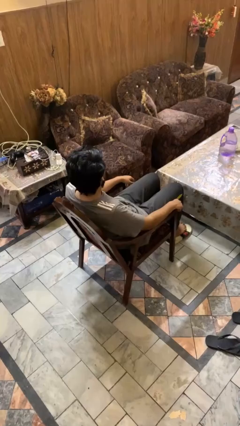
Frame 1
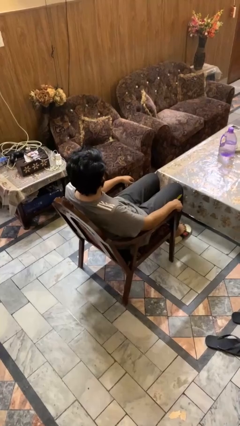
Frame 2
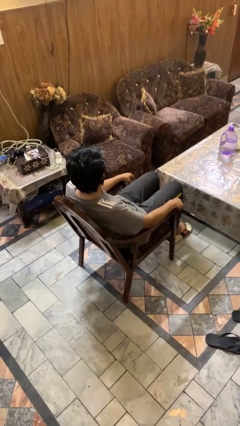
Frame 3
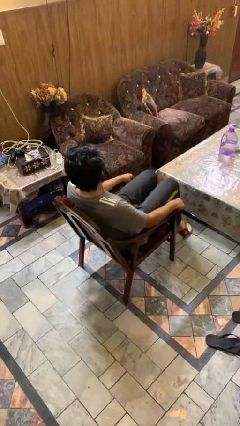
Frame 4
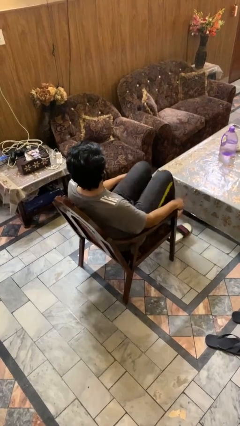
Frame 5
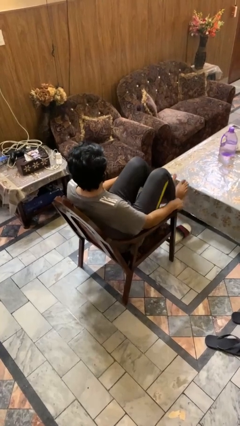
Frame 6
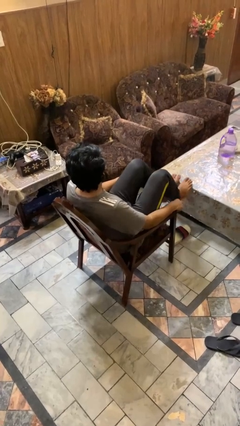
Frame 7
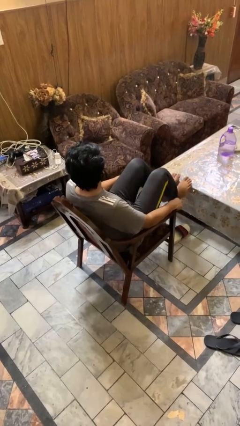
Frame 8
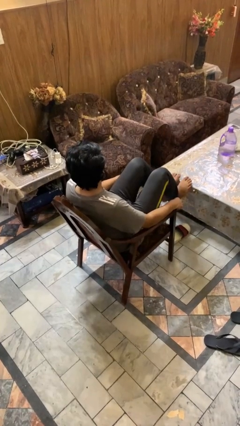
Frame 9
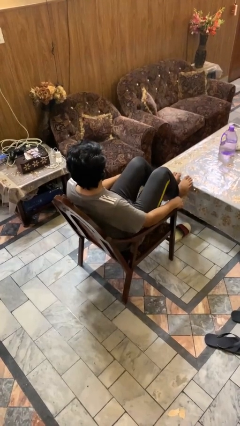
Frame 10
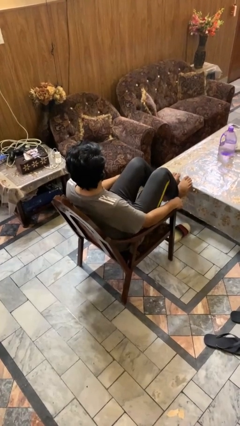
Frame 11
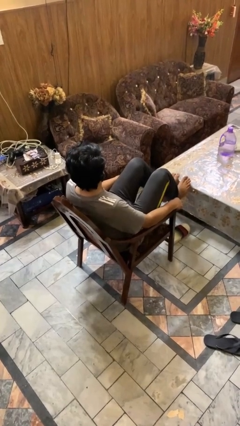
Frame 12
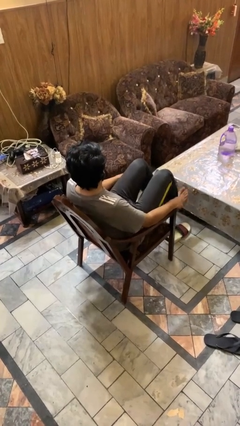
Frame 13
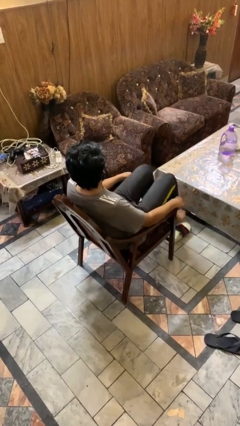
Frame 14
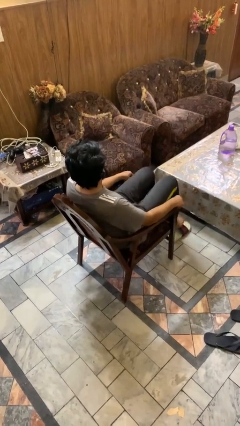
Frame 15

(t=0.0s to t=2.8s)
person puts feet up

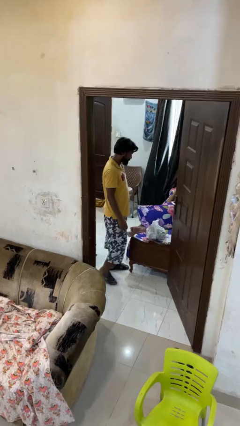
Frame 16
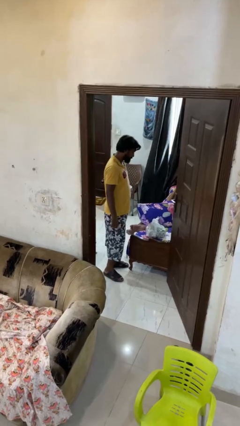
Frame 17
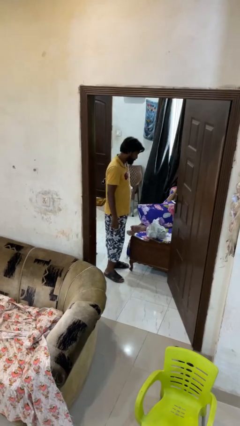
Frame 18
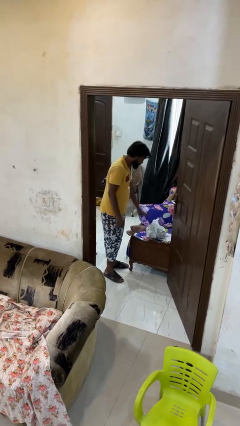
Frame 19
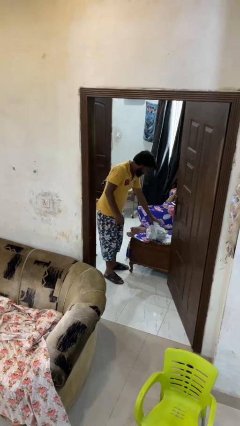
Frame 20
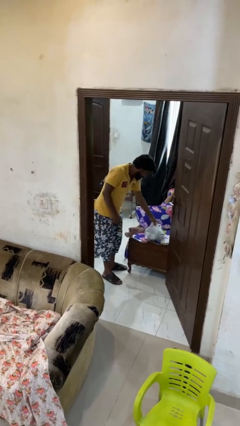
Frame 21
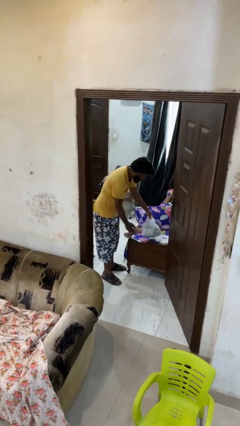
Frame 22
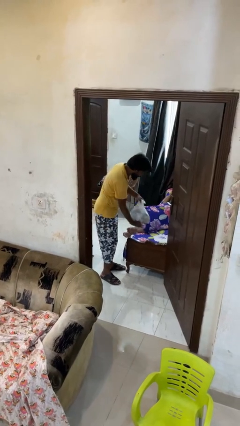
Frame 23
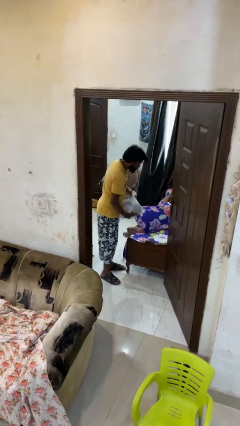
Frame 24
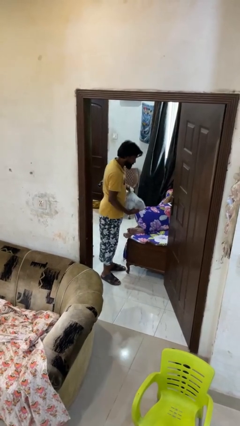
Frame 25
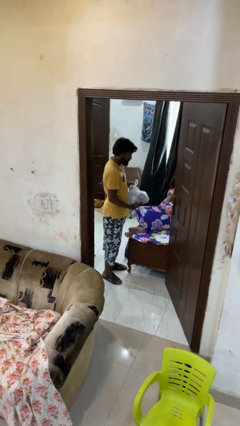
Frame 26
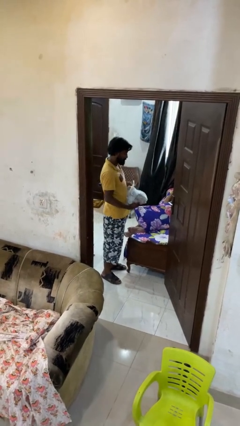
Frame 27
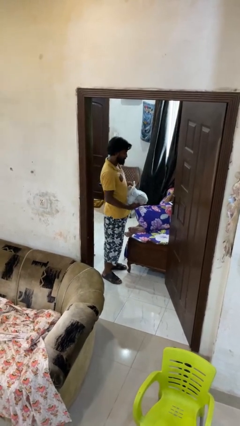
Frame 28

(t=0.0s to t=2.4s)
person picks up object from bed

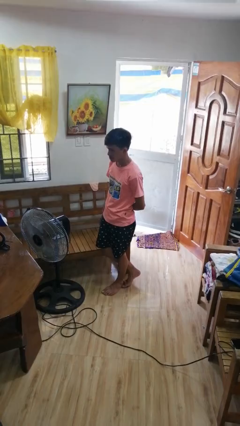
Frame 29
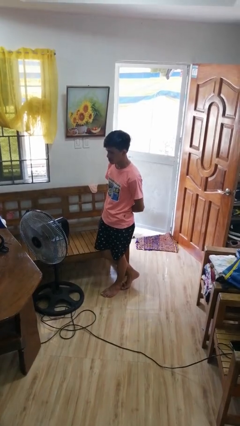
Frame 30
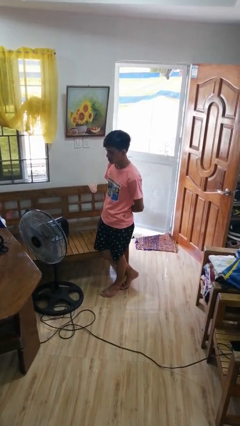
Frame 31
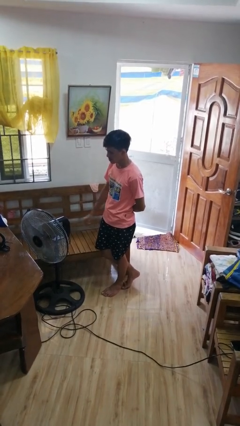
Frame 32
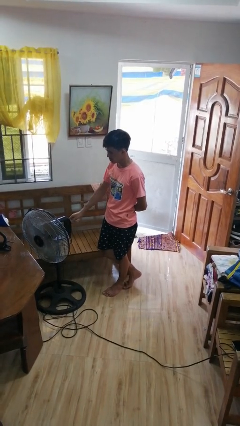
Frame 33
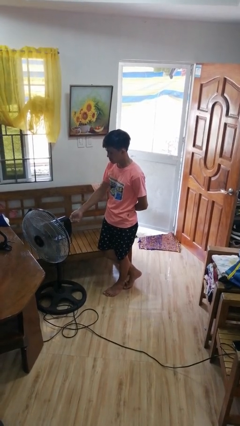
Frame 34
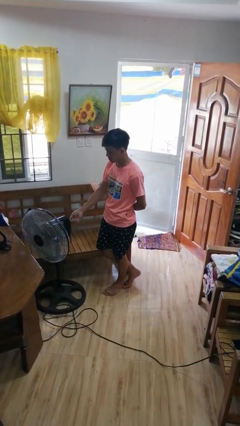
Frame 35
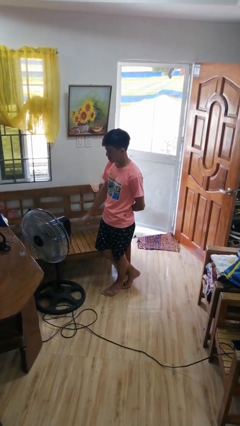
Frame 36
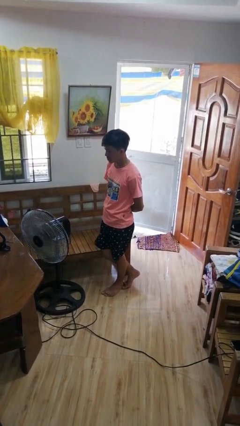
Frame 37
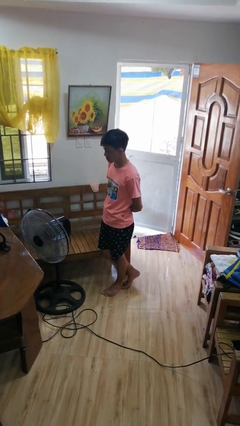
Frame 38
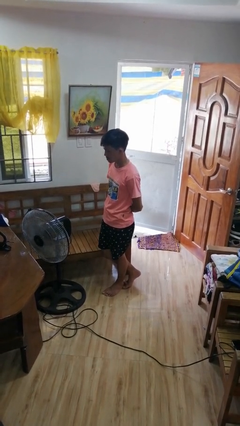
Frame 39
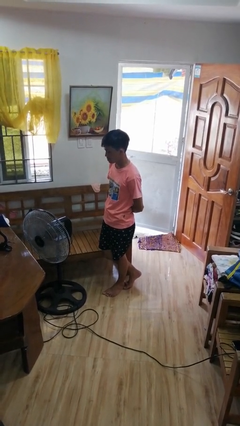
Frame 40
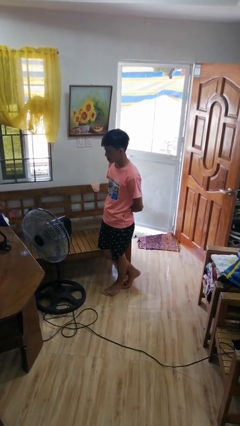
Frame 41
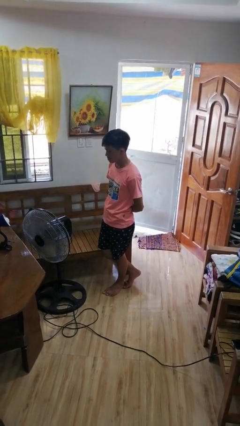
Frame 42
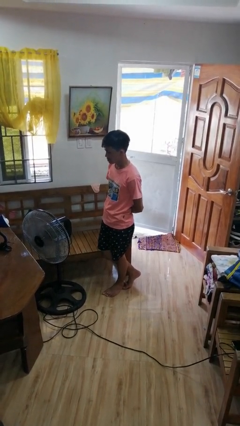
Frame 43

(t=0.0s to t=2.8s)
person turns on fan

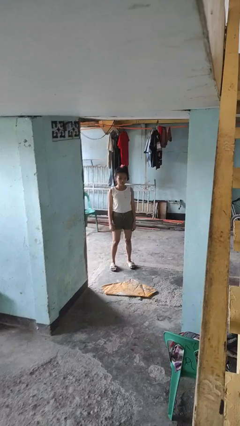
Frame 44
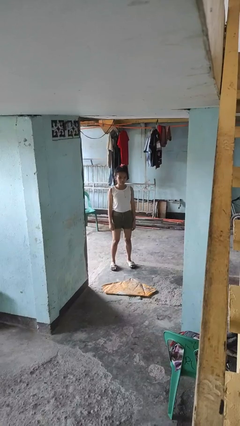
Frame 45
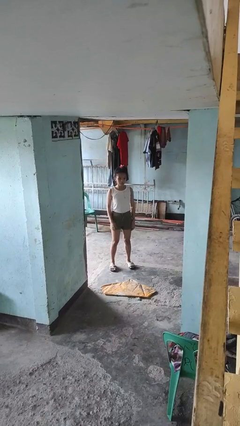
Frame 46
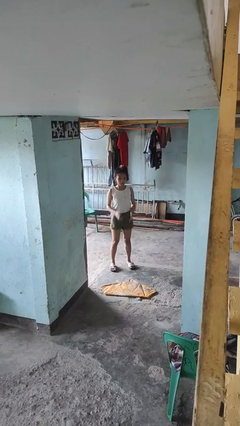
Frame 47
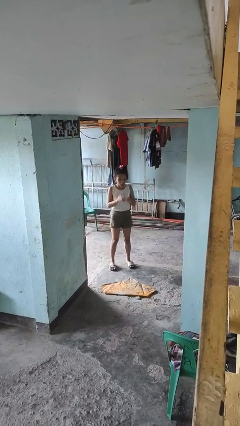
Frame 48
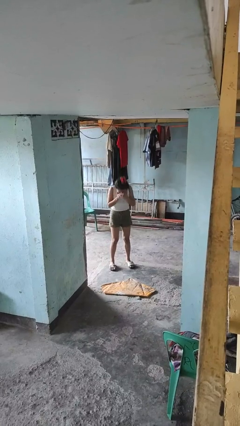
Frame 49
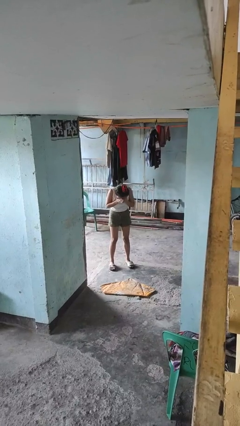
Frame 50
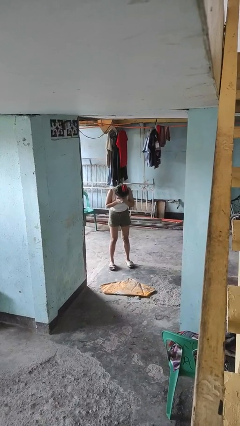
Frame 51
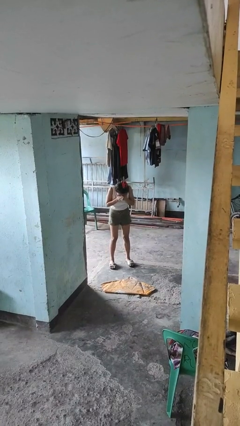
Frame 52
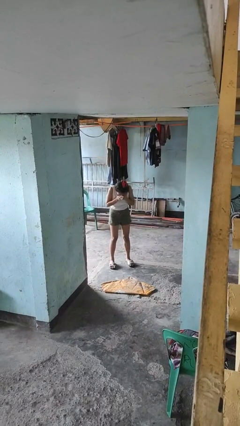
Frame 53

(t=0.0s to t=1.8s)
person sneezes into hand

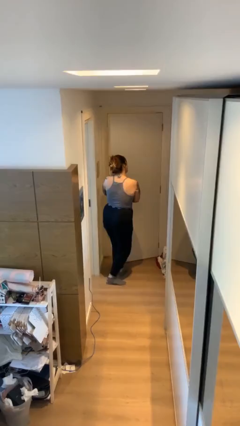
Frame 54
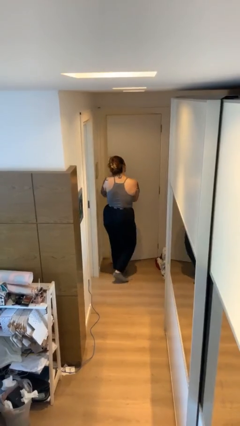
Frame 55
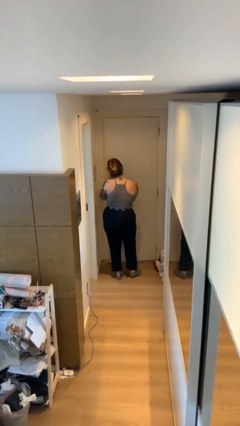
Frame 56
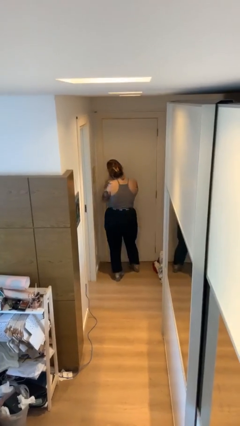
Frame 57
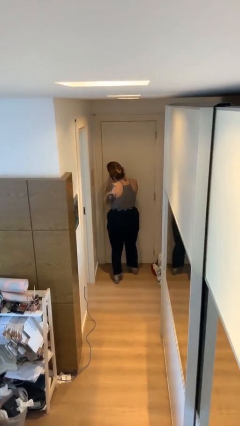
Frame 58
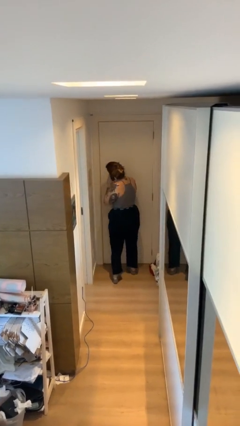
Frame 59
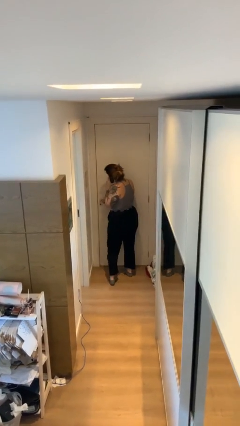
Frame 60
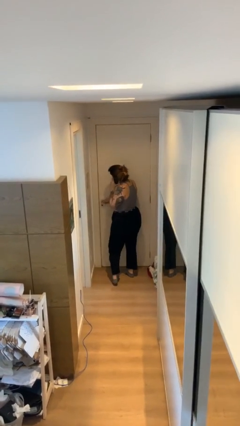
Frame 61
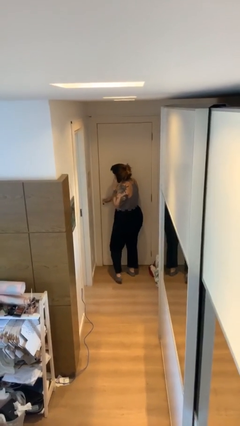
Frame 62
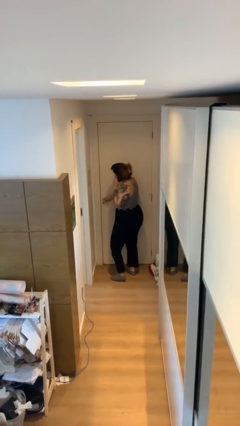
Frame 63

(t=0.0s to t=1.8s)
person closes facility door

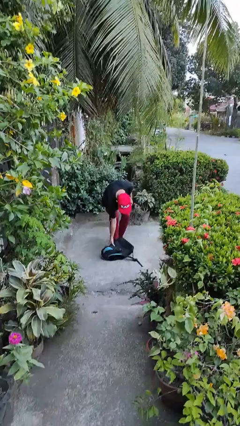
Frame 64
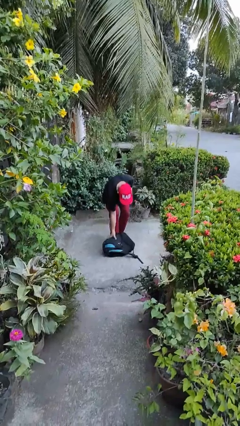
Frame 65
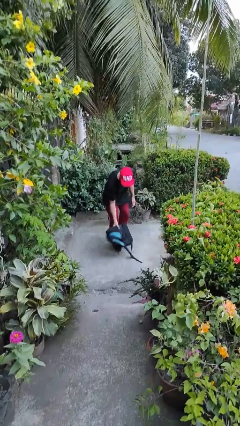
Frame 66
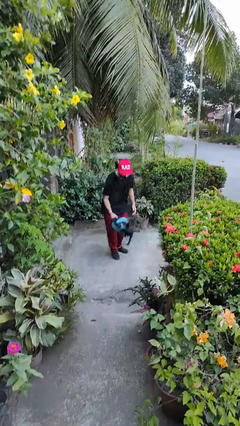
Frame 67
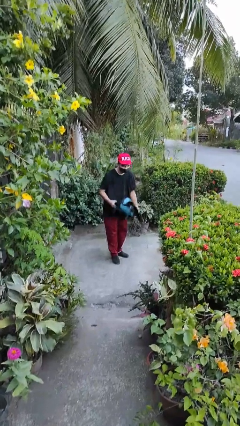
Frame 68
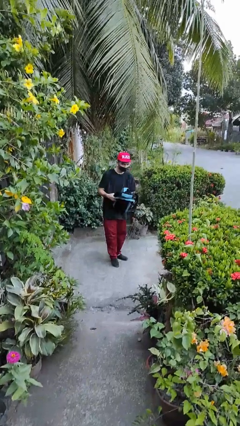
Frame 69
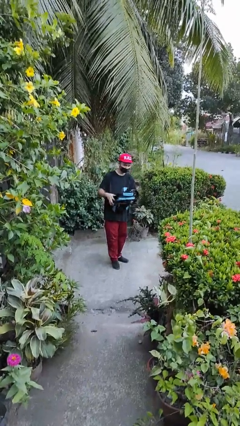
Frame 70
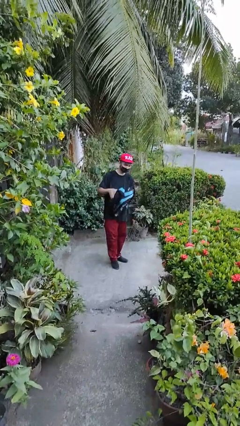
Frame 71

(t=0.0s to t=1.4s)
person picks up object from floor

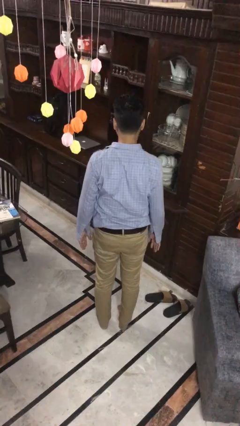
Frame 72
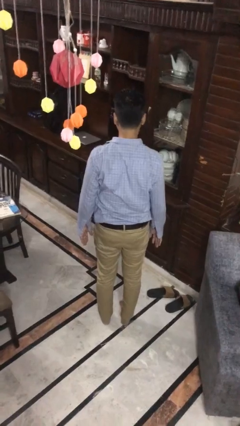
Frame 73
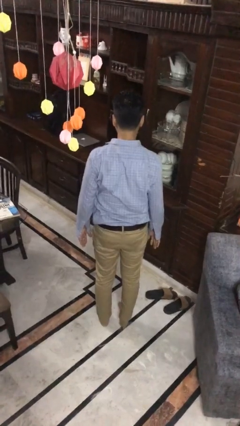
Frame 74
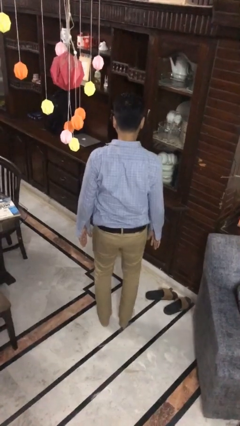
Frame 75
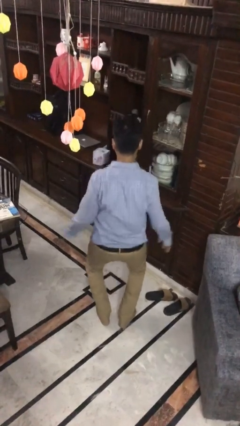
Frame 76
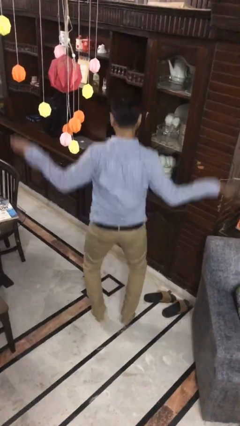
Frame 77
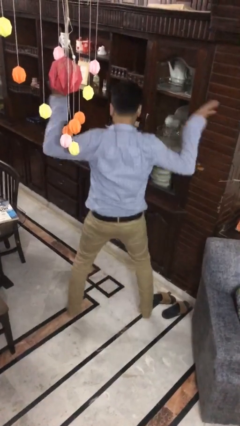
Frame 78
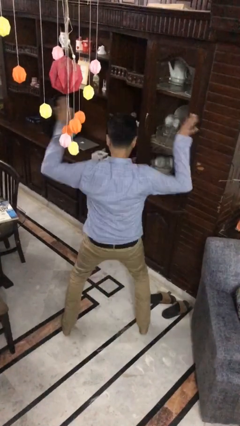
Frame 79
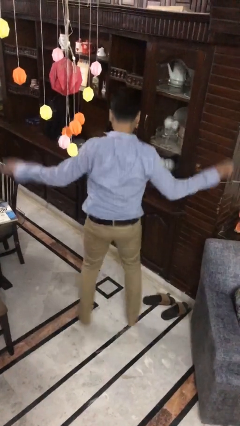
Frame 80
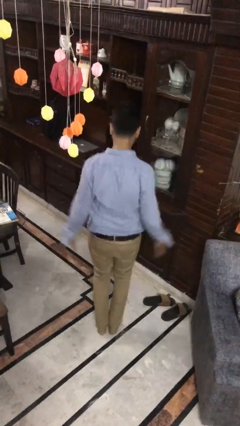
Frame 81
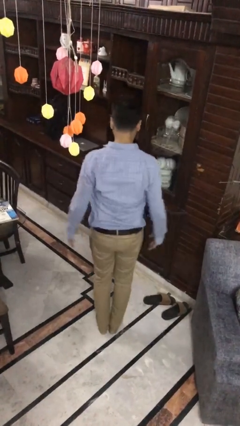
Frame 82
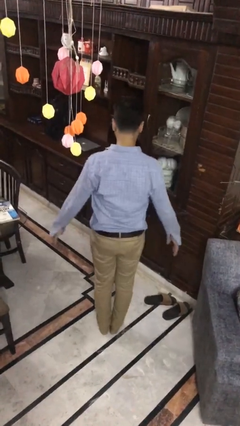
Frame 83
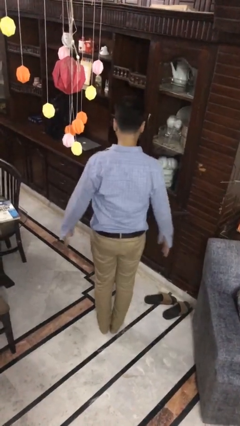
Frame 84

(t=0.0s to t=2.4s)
person exercises with jumping jacks

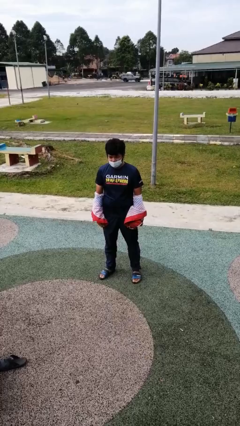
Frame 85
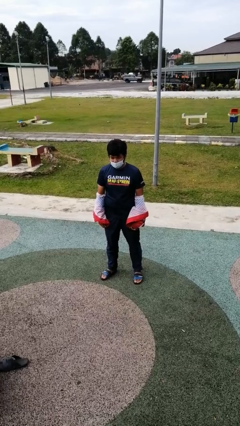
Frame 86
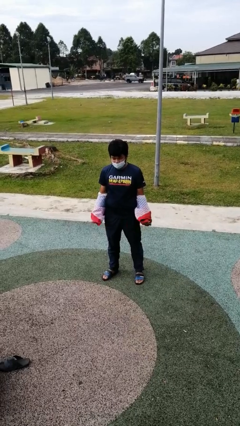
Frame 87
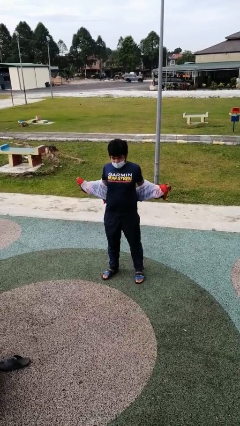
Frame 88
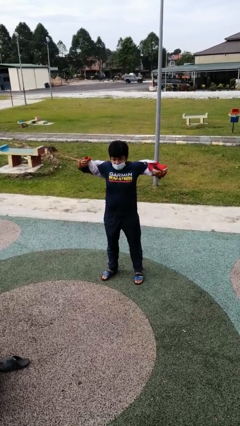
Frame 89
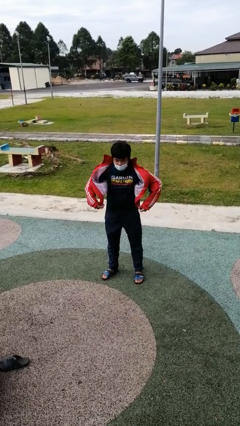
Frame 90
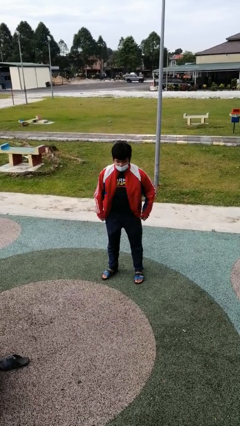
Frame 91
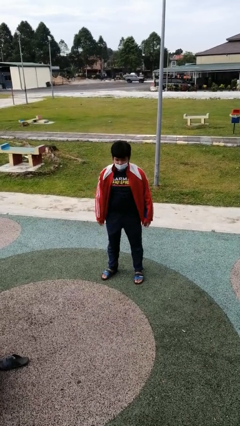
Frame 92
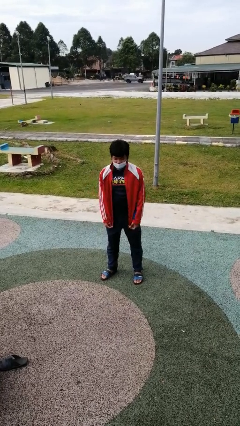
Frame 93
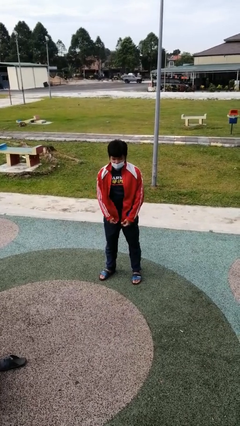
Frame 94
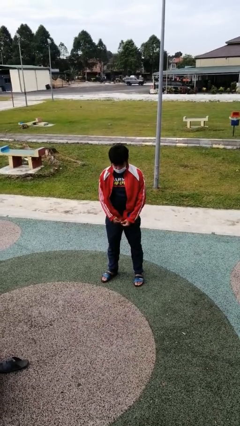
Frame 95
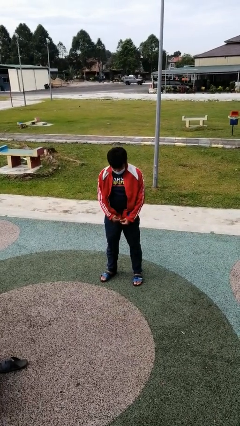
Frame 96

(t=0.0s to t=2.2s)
person puts on jacket
